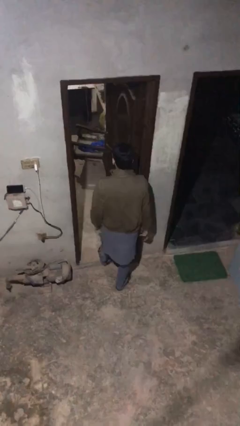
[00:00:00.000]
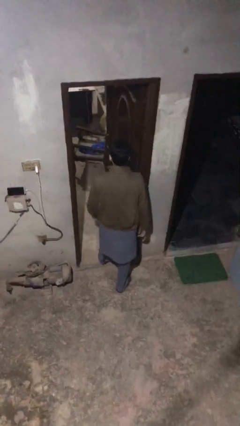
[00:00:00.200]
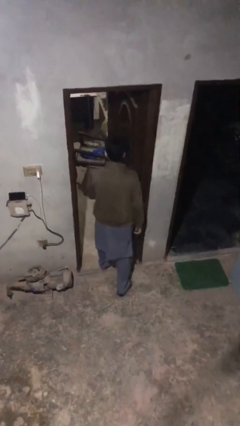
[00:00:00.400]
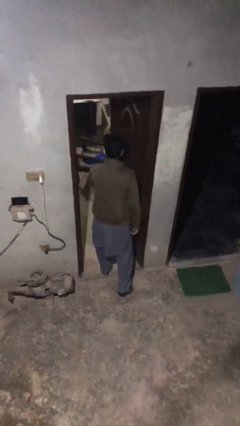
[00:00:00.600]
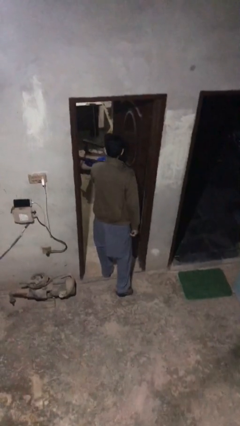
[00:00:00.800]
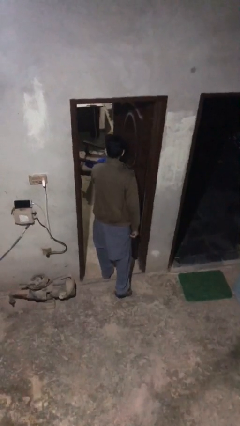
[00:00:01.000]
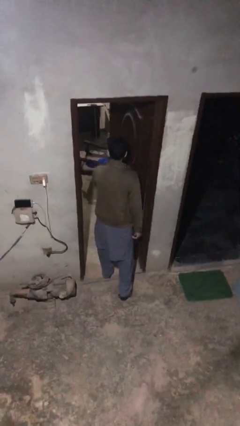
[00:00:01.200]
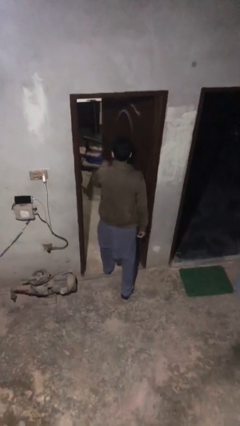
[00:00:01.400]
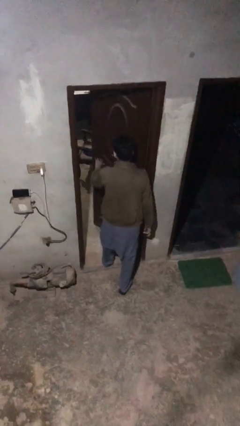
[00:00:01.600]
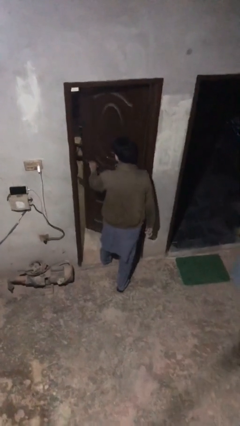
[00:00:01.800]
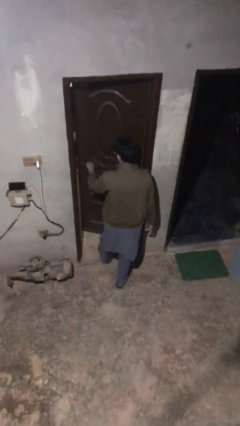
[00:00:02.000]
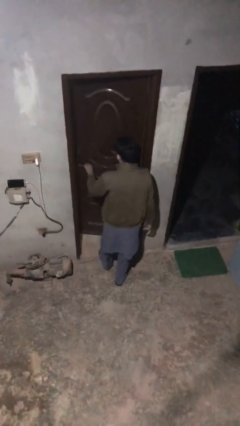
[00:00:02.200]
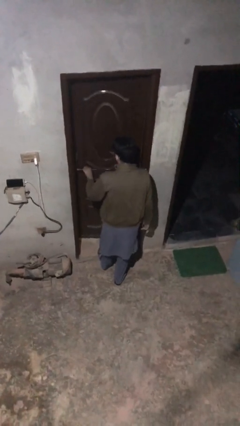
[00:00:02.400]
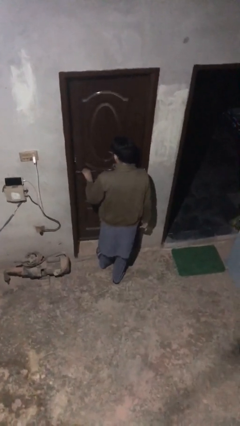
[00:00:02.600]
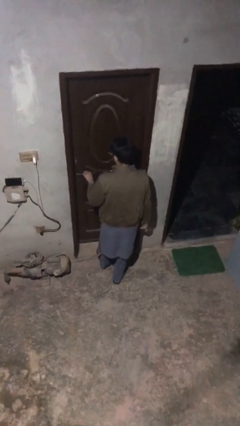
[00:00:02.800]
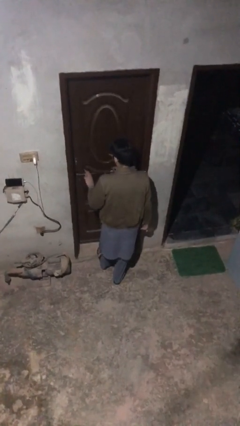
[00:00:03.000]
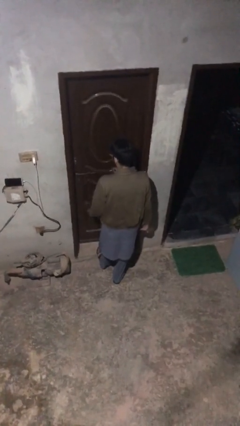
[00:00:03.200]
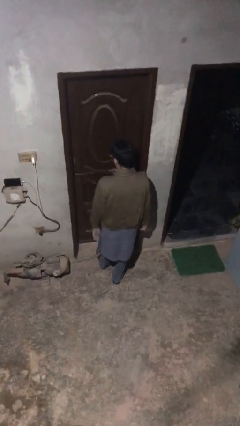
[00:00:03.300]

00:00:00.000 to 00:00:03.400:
person closes facility door

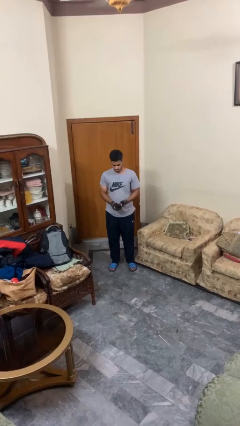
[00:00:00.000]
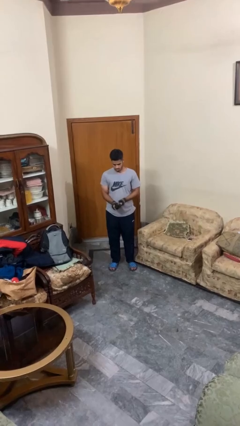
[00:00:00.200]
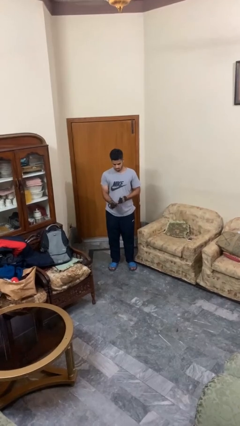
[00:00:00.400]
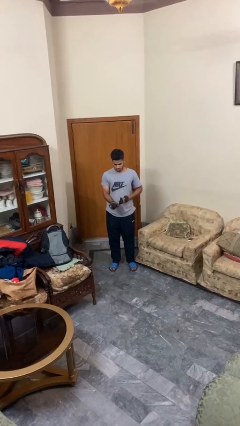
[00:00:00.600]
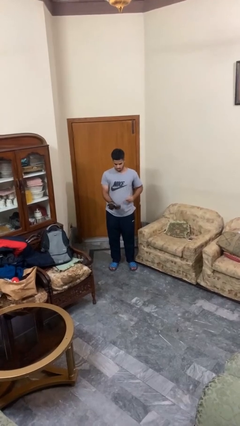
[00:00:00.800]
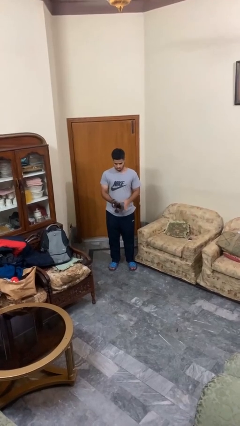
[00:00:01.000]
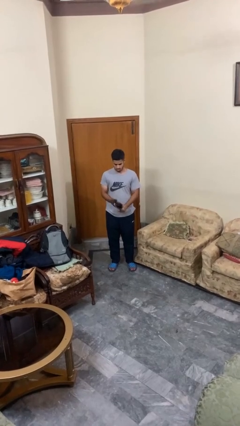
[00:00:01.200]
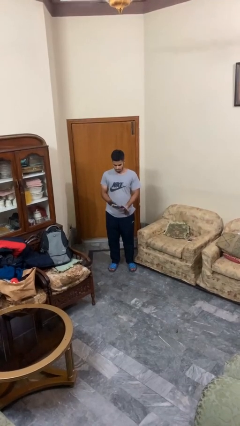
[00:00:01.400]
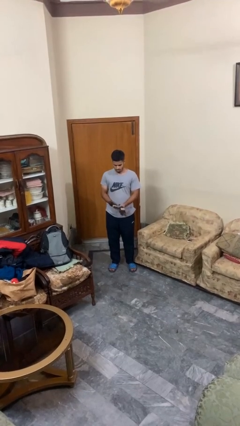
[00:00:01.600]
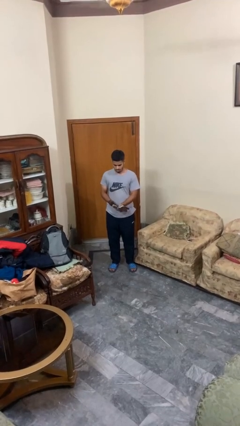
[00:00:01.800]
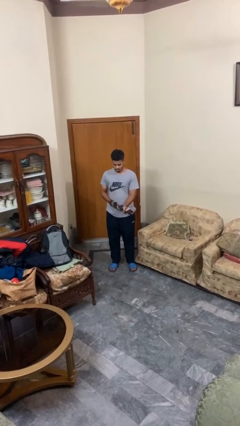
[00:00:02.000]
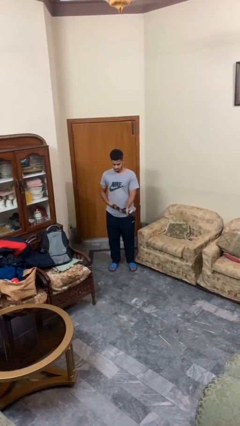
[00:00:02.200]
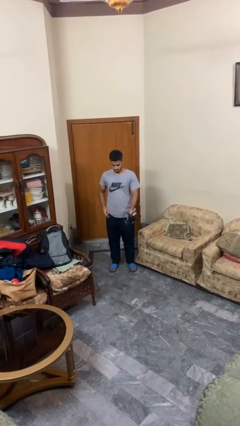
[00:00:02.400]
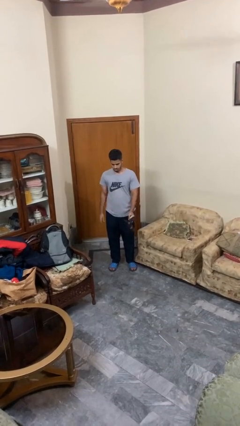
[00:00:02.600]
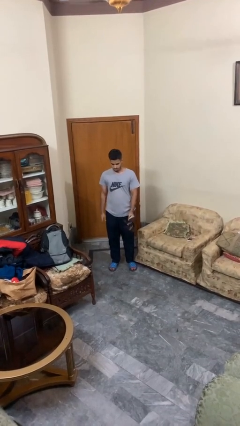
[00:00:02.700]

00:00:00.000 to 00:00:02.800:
person takes off gloves

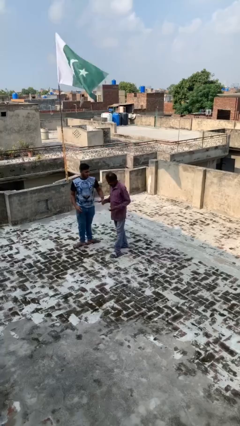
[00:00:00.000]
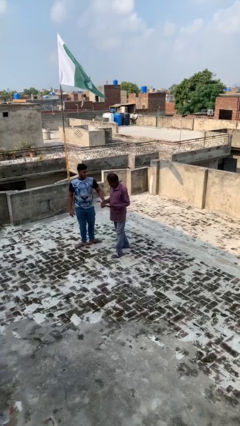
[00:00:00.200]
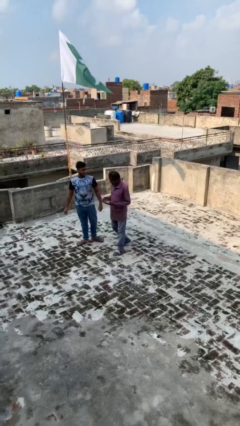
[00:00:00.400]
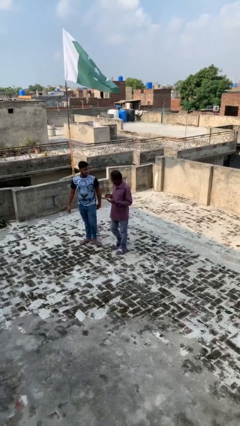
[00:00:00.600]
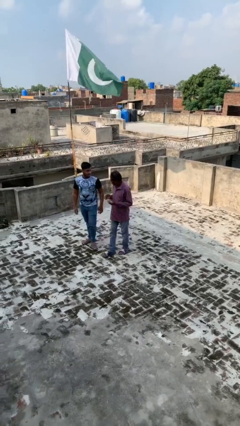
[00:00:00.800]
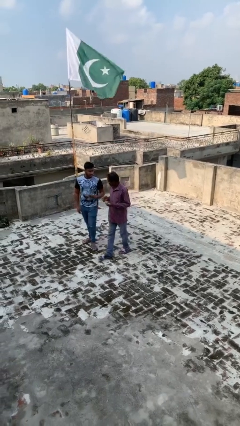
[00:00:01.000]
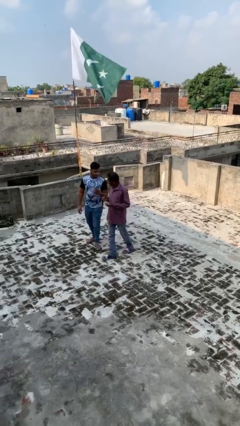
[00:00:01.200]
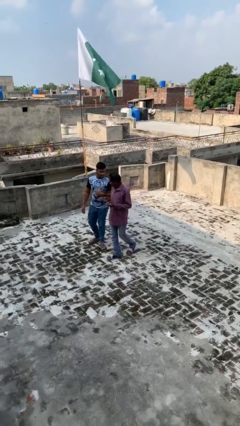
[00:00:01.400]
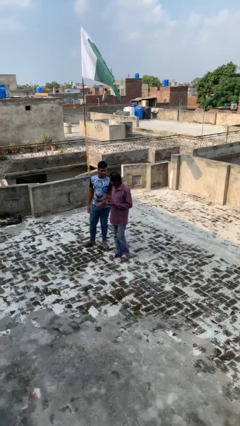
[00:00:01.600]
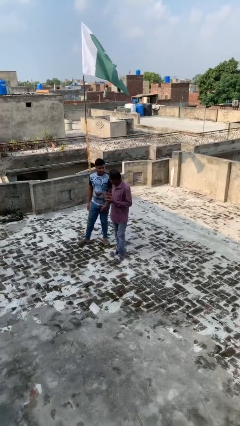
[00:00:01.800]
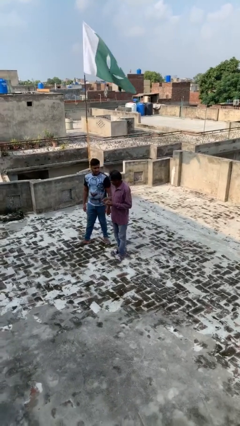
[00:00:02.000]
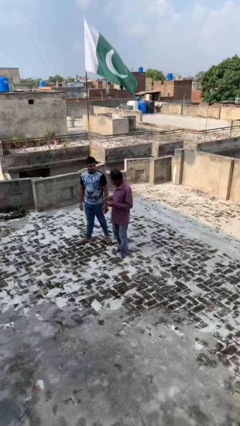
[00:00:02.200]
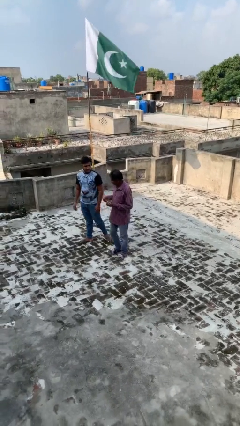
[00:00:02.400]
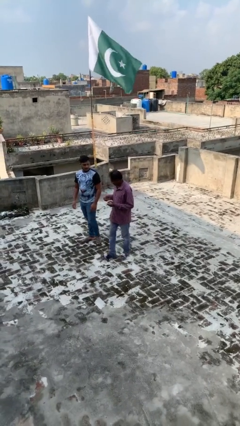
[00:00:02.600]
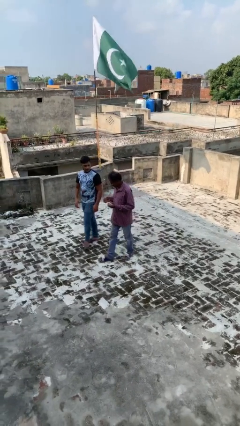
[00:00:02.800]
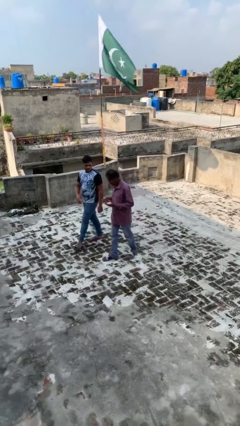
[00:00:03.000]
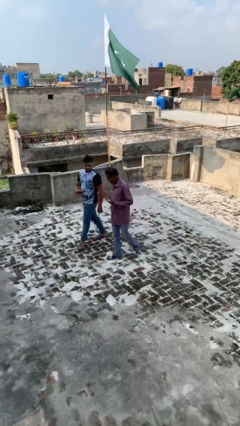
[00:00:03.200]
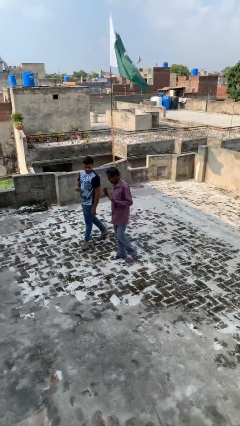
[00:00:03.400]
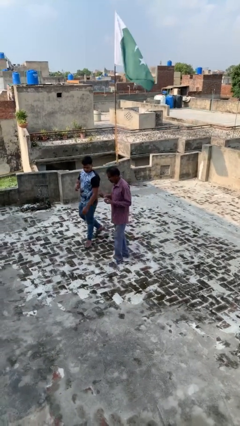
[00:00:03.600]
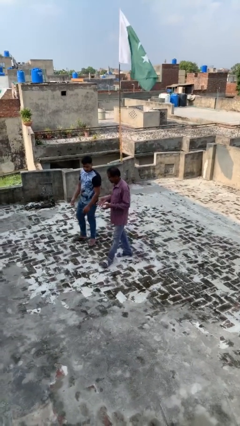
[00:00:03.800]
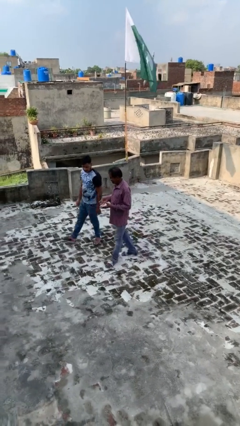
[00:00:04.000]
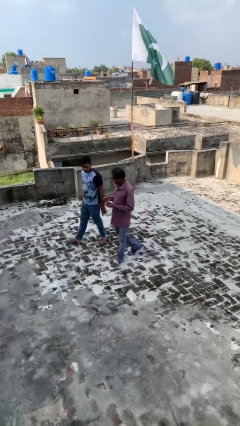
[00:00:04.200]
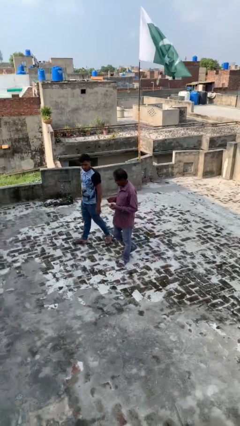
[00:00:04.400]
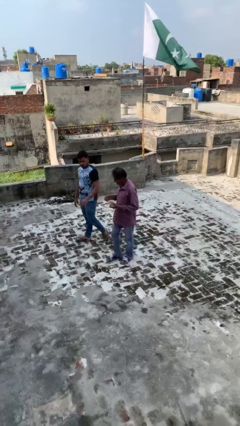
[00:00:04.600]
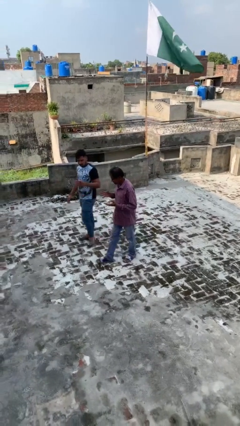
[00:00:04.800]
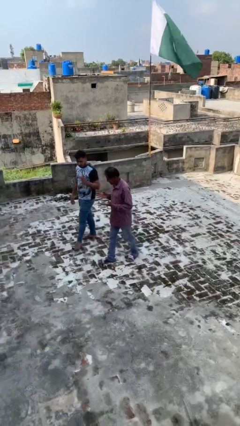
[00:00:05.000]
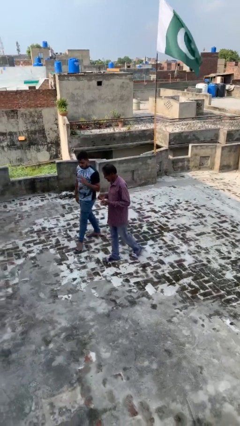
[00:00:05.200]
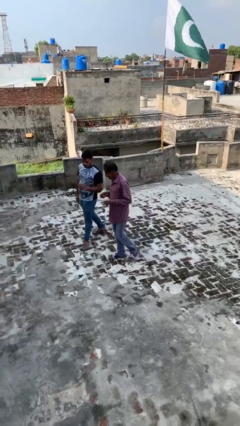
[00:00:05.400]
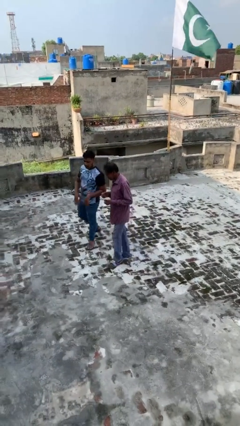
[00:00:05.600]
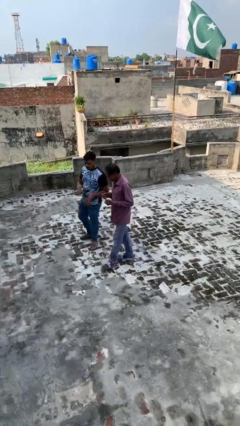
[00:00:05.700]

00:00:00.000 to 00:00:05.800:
person talks to person

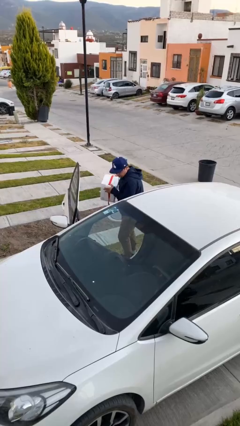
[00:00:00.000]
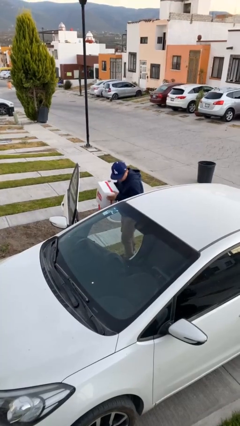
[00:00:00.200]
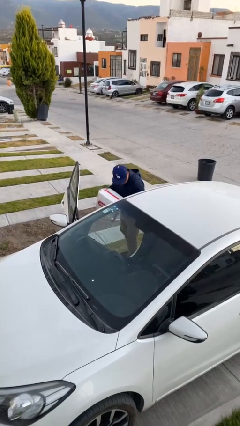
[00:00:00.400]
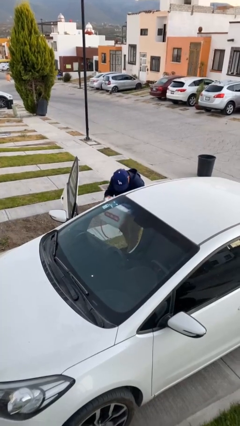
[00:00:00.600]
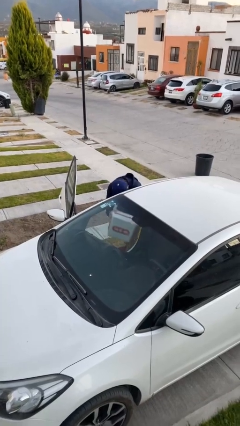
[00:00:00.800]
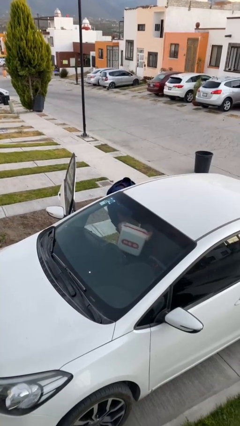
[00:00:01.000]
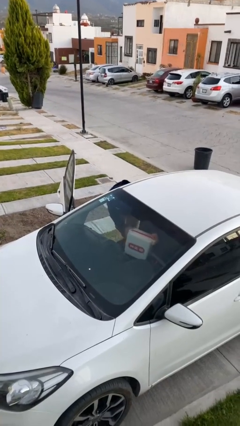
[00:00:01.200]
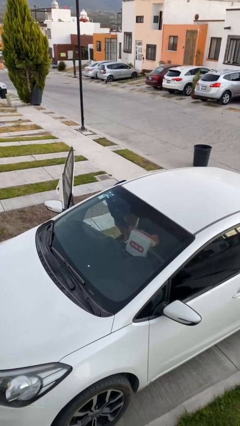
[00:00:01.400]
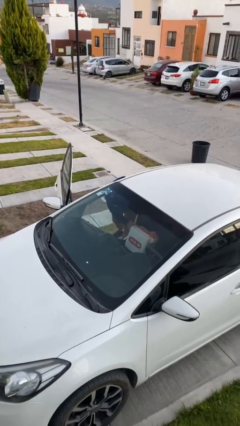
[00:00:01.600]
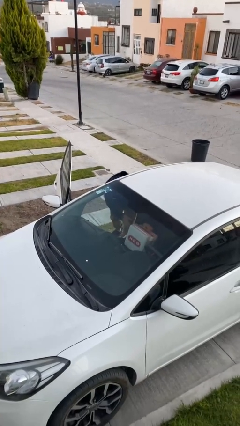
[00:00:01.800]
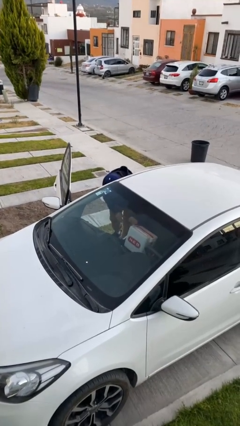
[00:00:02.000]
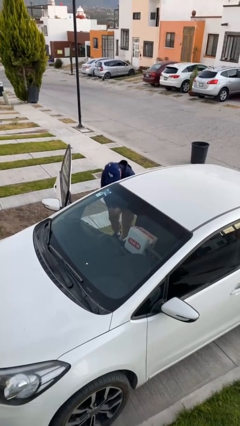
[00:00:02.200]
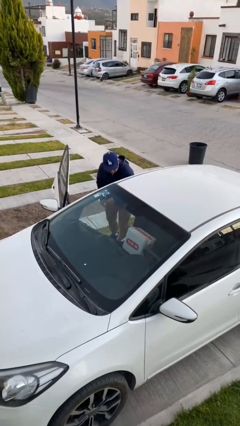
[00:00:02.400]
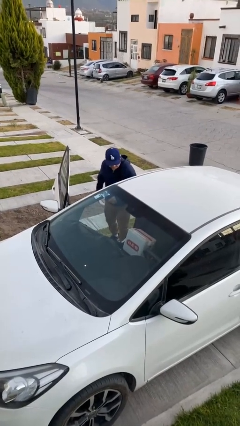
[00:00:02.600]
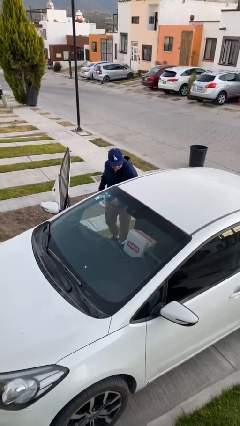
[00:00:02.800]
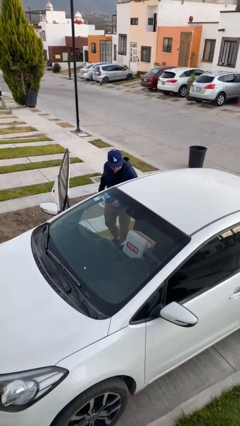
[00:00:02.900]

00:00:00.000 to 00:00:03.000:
person loads car

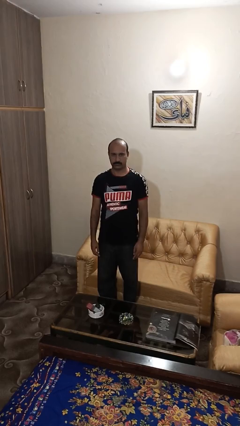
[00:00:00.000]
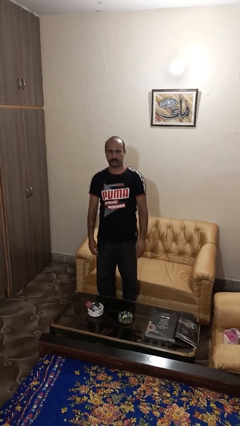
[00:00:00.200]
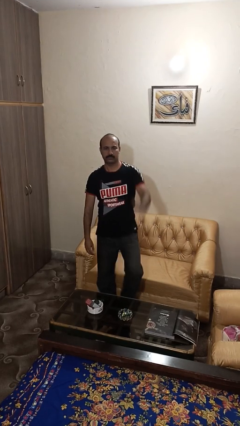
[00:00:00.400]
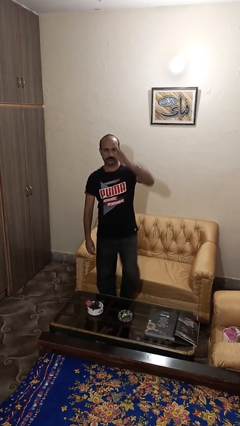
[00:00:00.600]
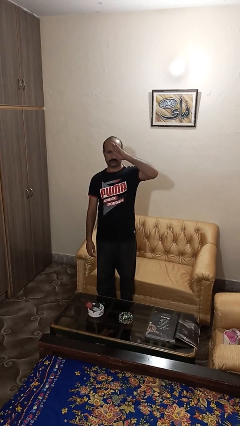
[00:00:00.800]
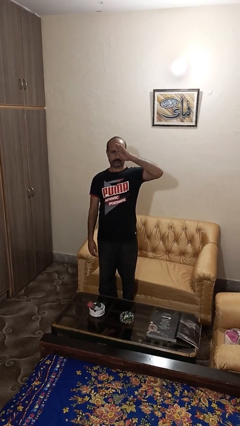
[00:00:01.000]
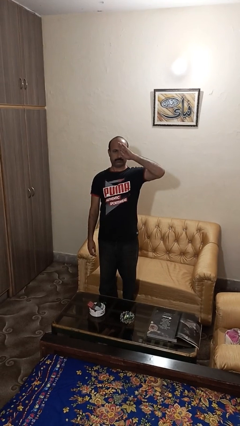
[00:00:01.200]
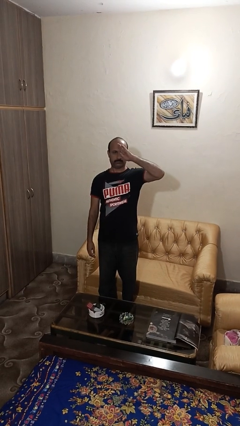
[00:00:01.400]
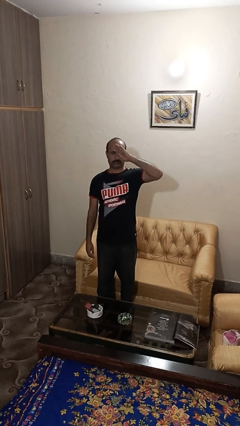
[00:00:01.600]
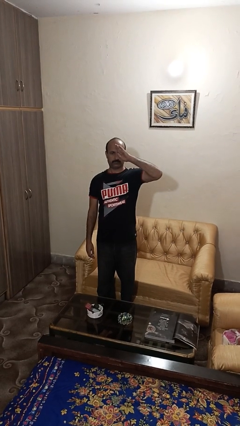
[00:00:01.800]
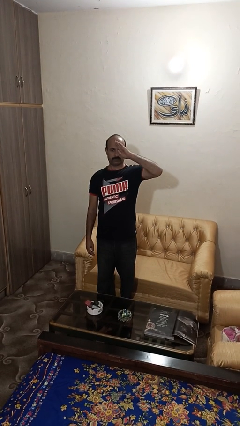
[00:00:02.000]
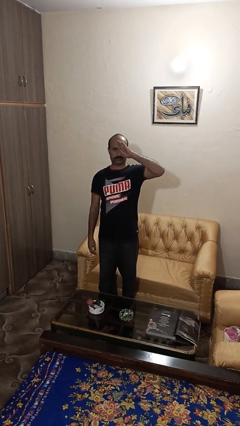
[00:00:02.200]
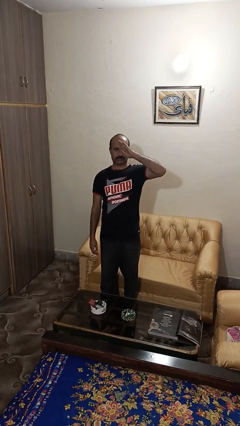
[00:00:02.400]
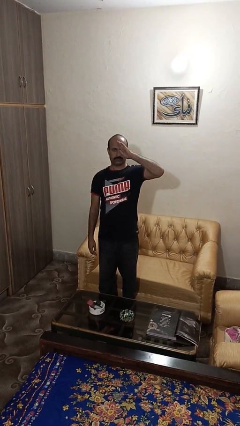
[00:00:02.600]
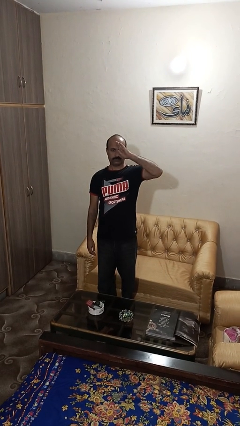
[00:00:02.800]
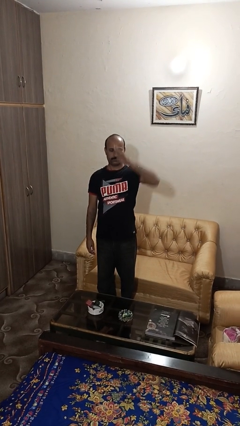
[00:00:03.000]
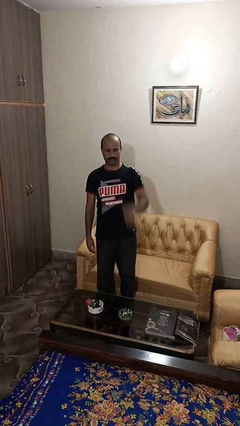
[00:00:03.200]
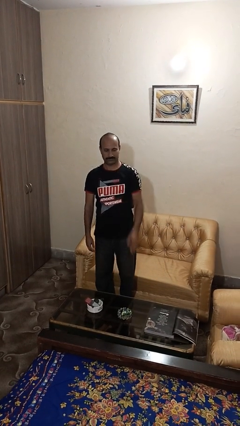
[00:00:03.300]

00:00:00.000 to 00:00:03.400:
person salutes
